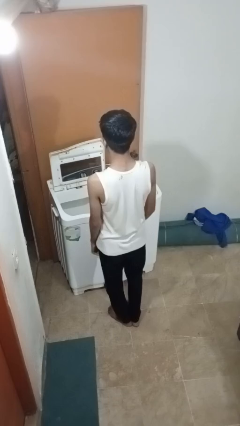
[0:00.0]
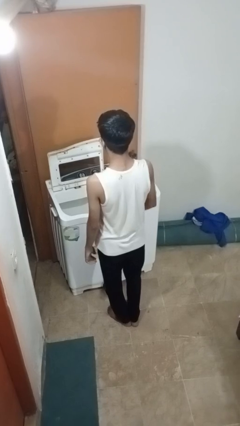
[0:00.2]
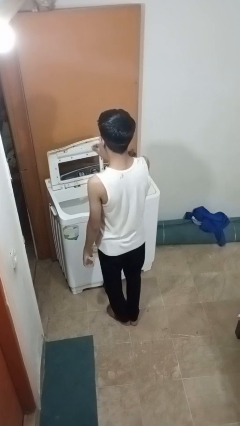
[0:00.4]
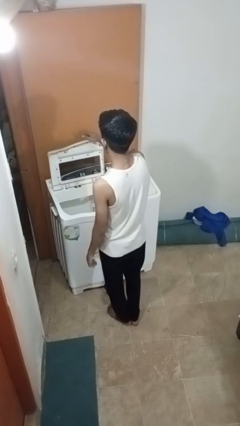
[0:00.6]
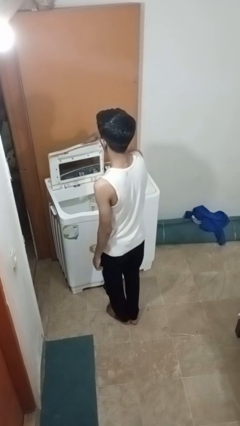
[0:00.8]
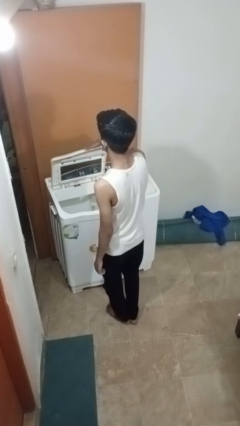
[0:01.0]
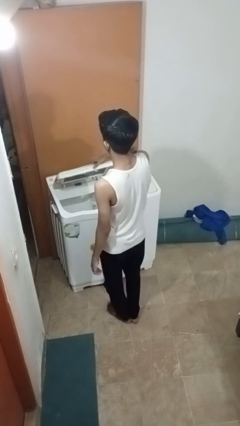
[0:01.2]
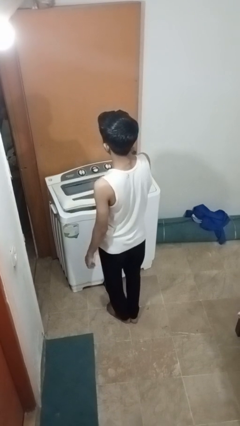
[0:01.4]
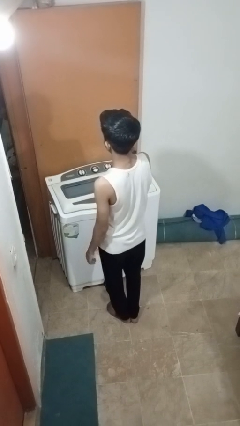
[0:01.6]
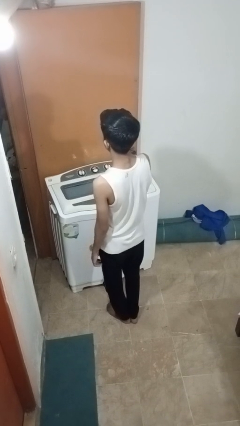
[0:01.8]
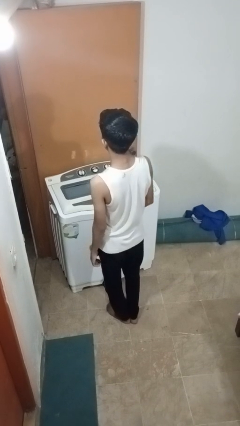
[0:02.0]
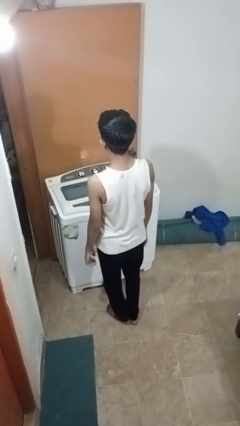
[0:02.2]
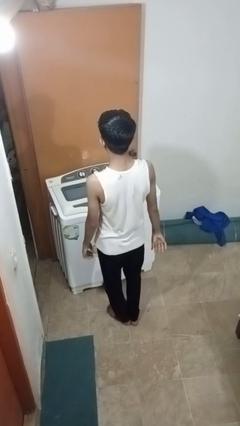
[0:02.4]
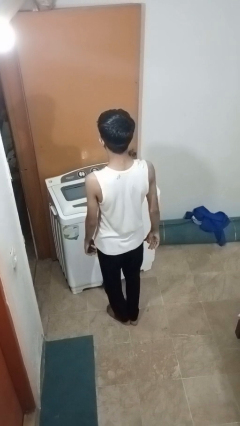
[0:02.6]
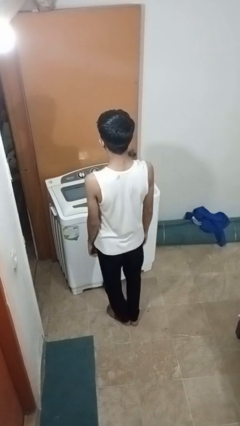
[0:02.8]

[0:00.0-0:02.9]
person closes clothes washer

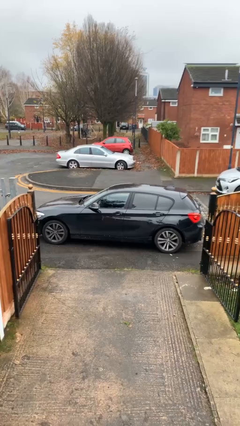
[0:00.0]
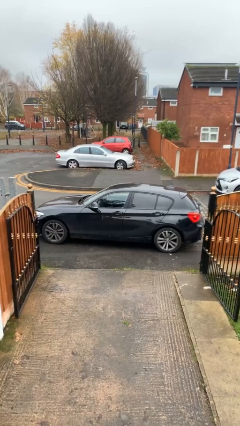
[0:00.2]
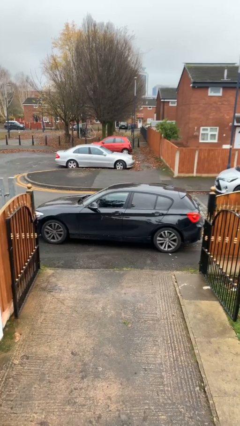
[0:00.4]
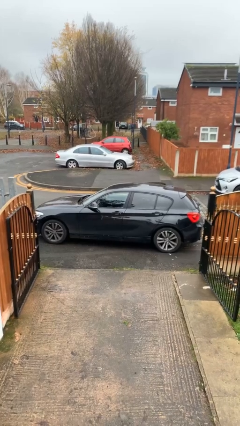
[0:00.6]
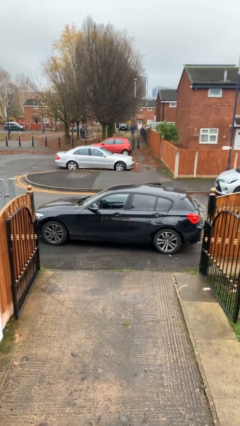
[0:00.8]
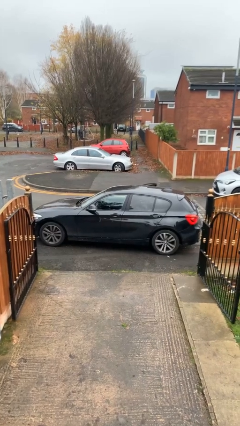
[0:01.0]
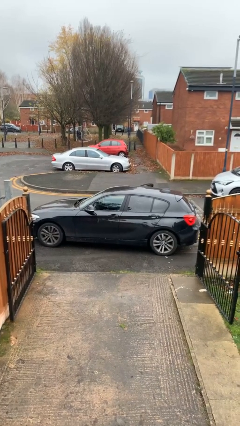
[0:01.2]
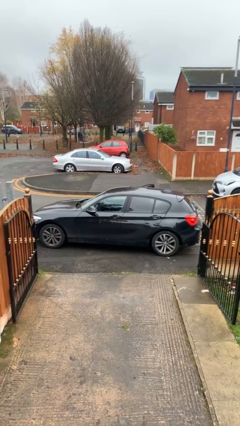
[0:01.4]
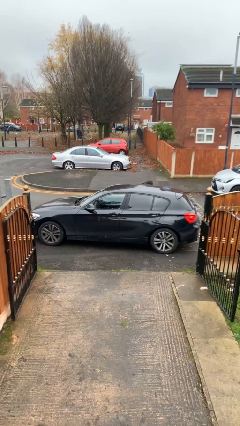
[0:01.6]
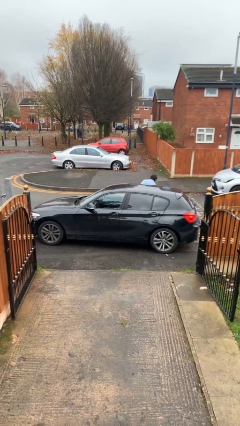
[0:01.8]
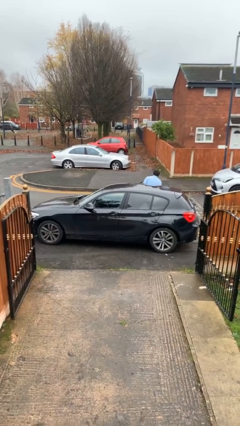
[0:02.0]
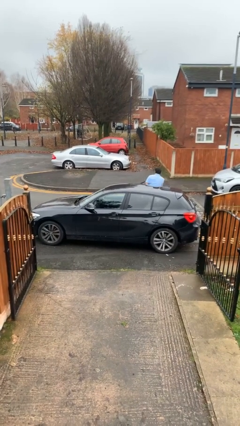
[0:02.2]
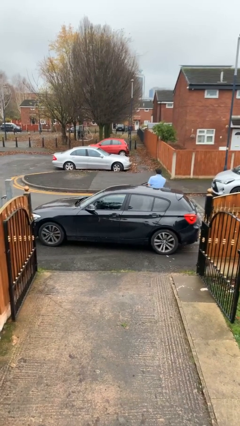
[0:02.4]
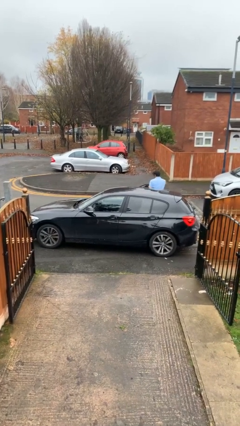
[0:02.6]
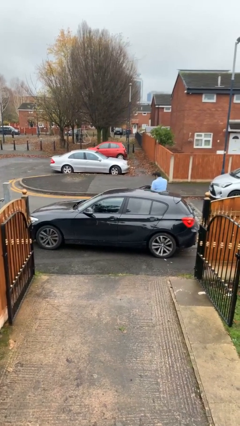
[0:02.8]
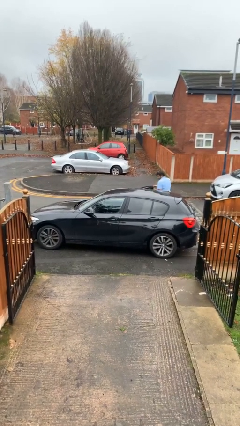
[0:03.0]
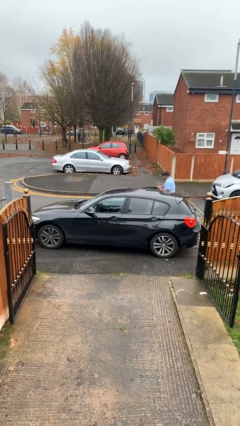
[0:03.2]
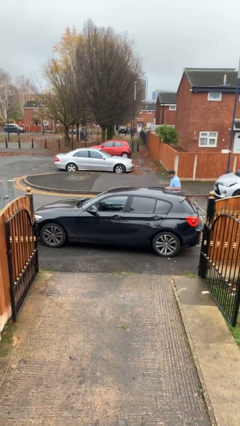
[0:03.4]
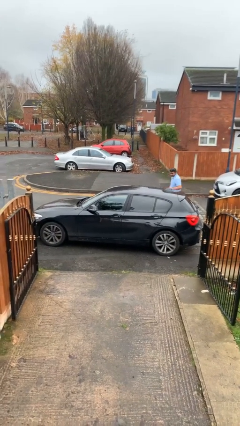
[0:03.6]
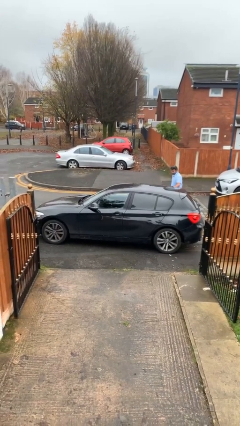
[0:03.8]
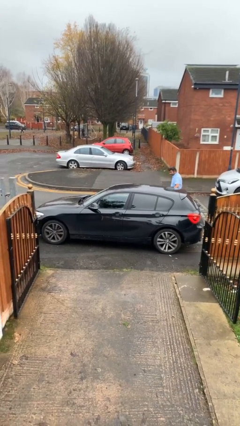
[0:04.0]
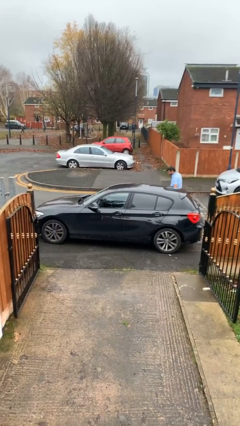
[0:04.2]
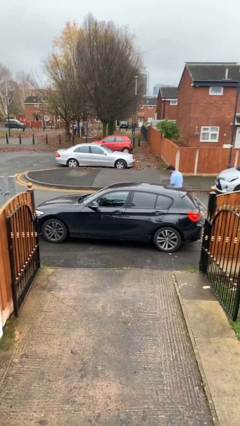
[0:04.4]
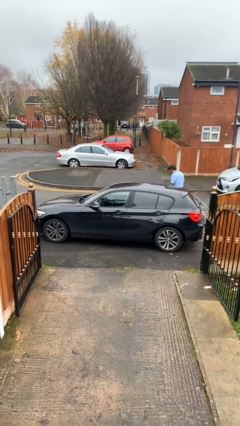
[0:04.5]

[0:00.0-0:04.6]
car drops off person

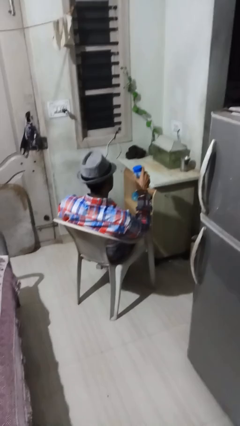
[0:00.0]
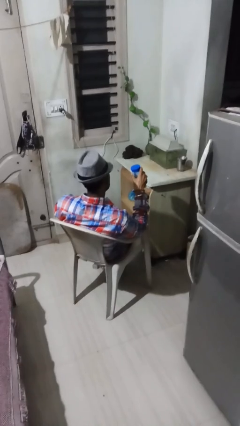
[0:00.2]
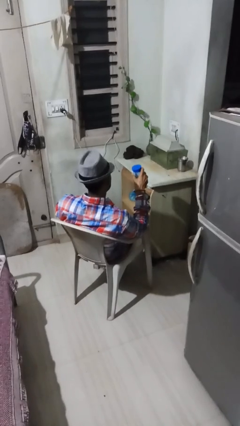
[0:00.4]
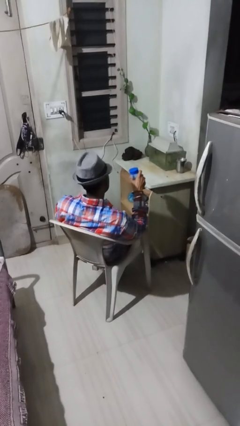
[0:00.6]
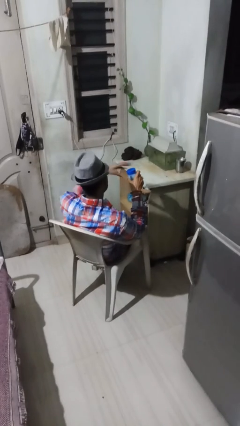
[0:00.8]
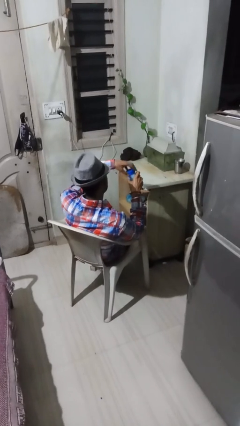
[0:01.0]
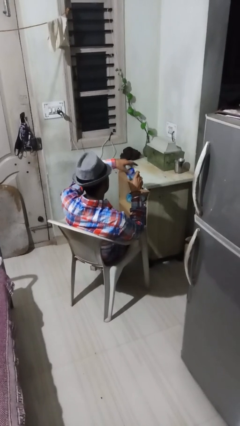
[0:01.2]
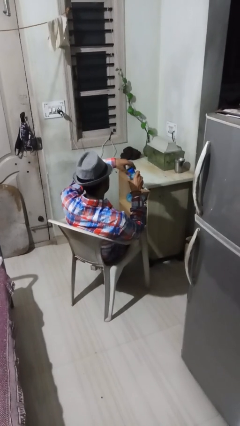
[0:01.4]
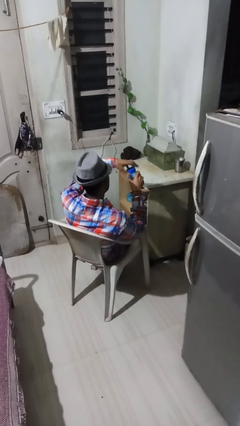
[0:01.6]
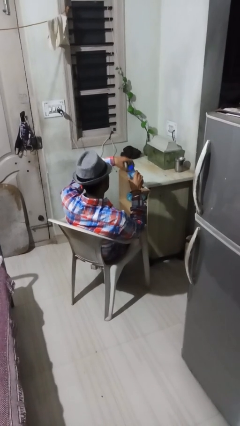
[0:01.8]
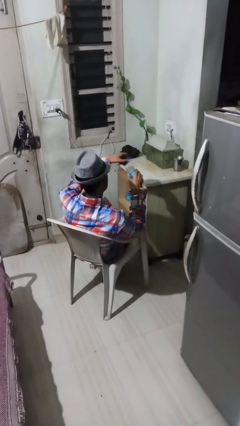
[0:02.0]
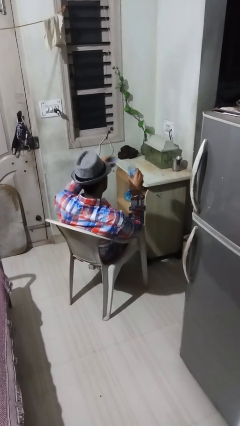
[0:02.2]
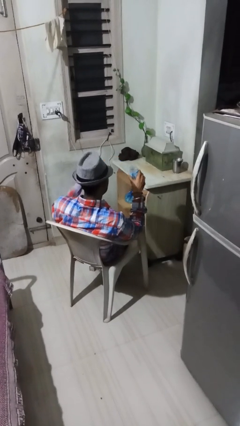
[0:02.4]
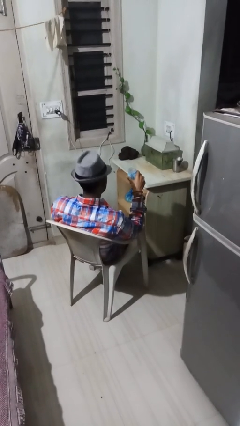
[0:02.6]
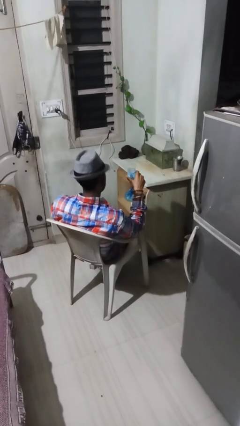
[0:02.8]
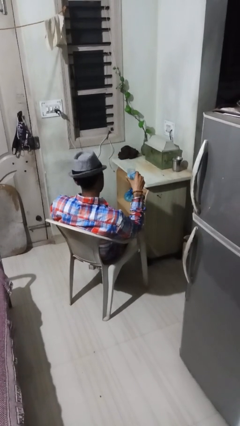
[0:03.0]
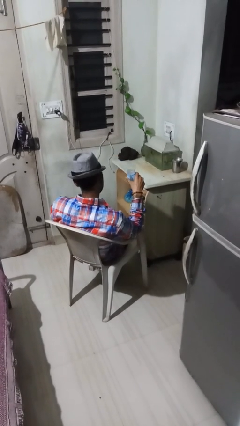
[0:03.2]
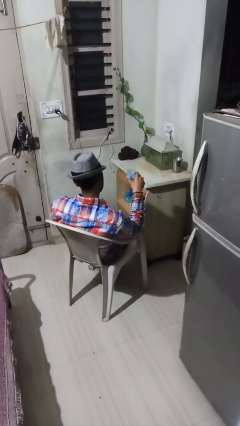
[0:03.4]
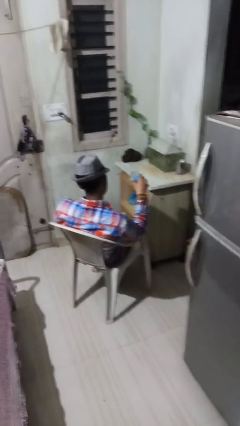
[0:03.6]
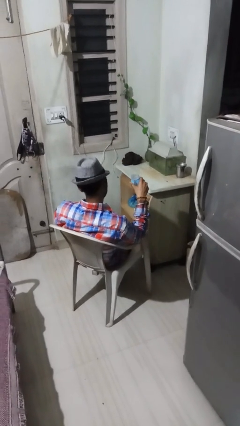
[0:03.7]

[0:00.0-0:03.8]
person opens jar

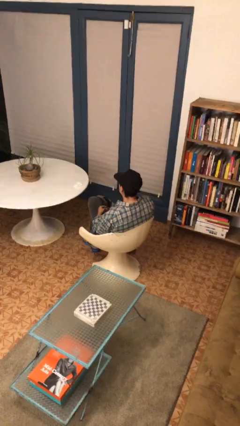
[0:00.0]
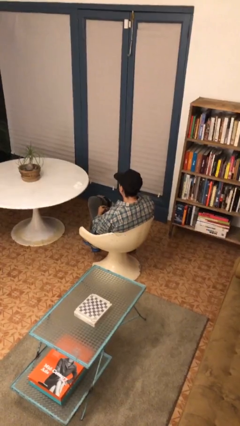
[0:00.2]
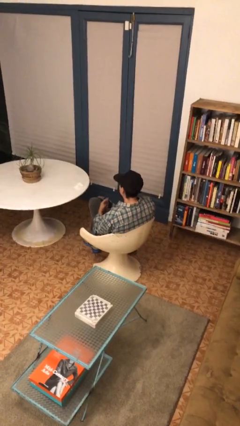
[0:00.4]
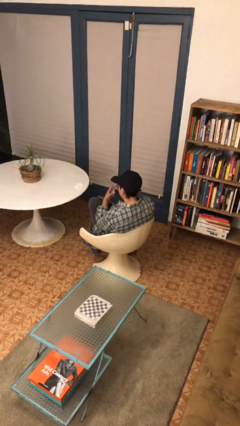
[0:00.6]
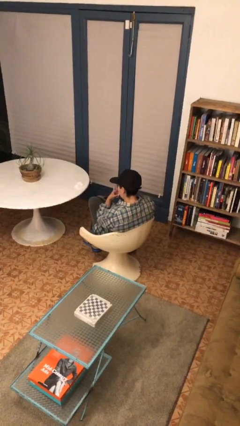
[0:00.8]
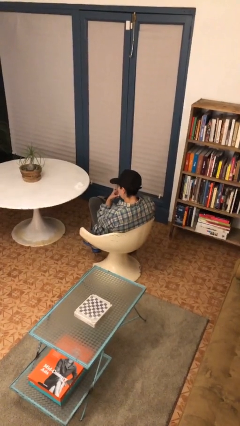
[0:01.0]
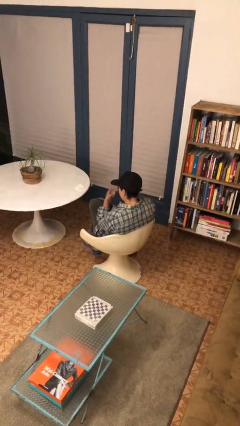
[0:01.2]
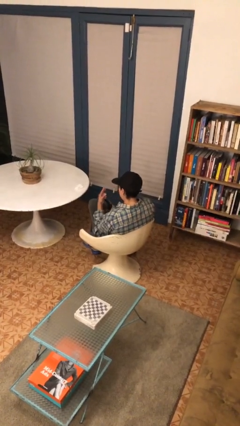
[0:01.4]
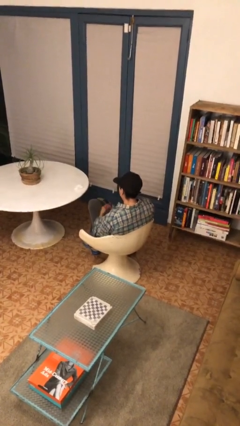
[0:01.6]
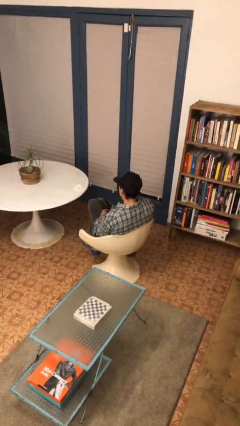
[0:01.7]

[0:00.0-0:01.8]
person gestures watch closely

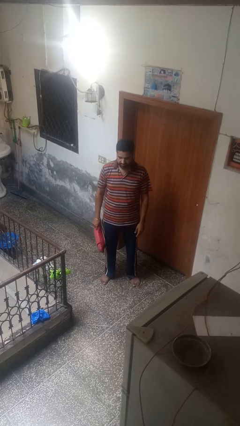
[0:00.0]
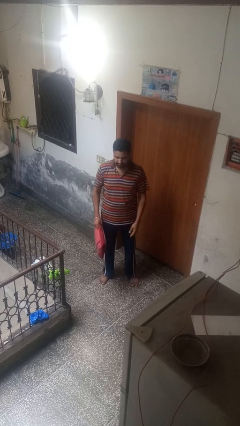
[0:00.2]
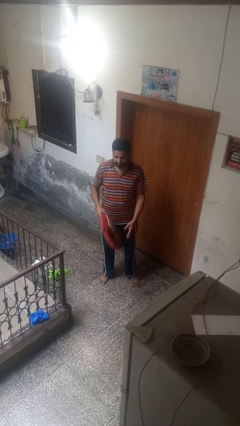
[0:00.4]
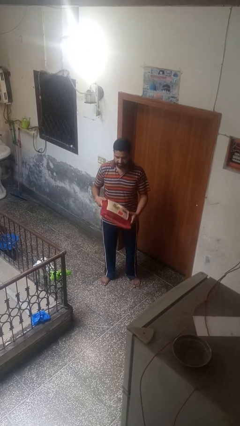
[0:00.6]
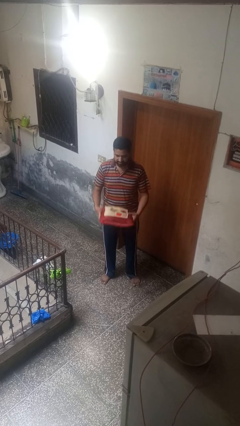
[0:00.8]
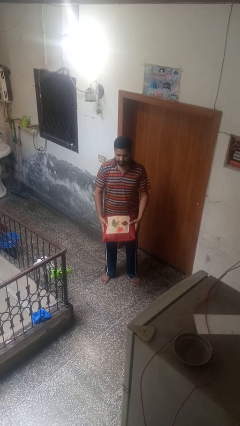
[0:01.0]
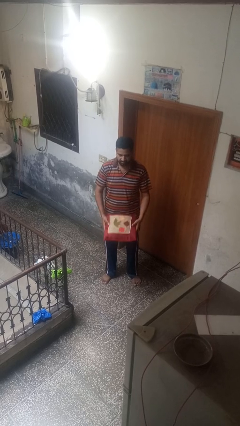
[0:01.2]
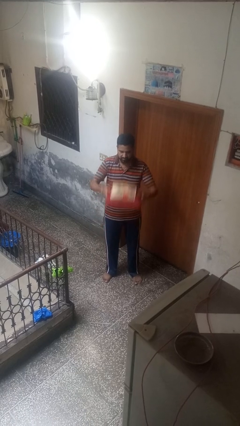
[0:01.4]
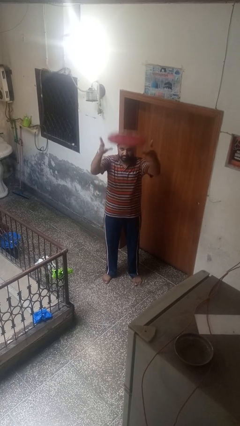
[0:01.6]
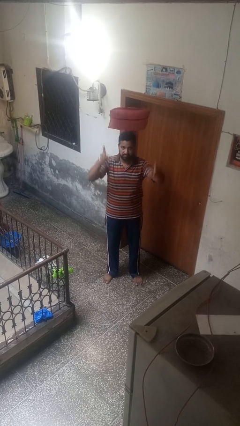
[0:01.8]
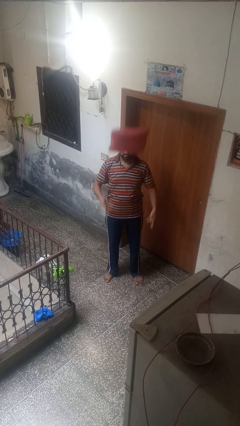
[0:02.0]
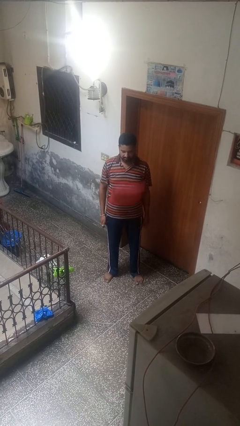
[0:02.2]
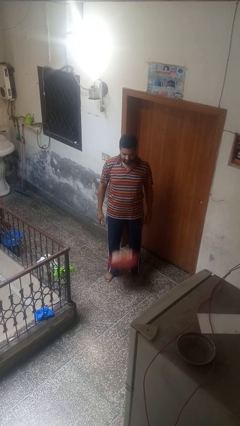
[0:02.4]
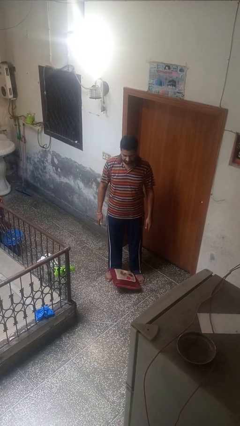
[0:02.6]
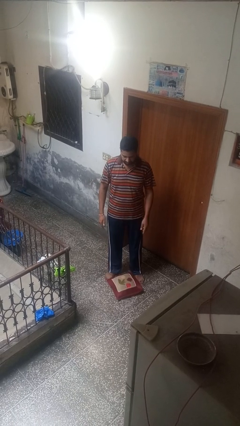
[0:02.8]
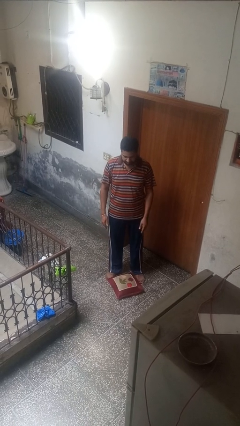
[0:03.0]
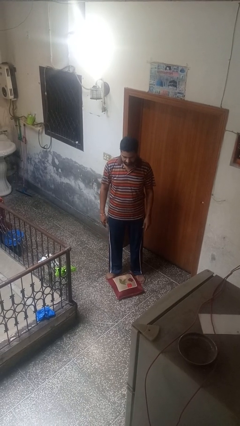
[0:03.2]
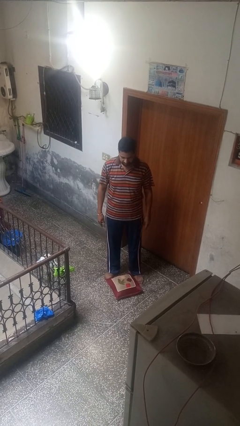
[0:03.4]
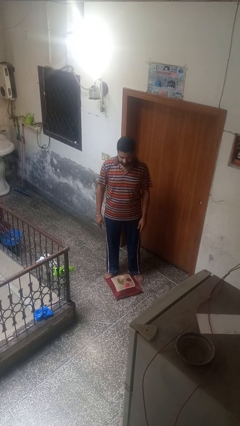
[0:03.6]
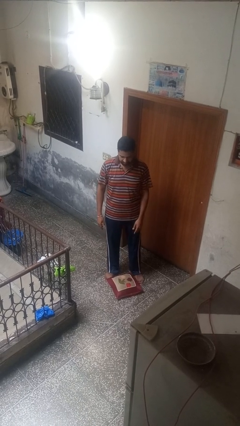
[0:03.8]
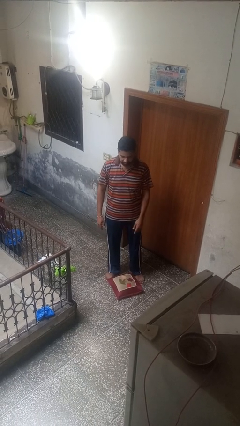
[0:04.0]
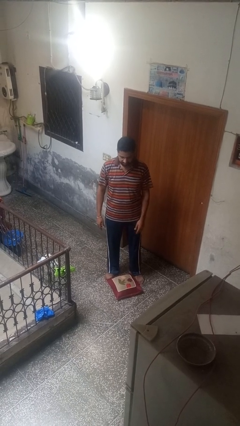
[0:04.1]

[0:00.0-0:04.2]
person throws object into air

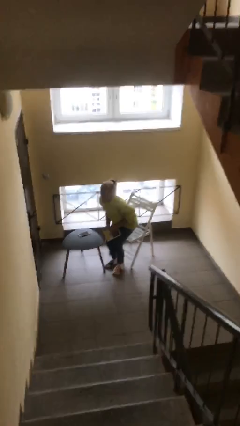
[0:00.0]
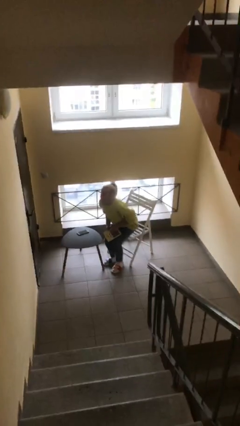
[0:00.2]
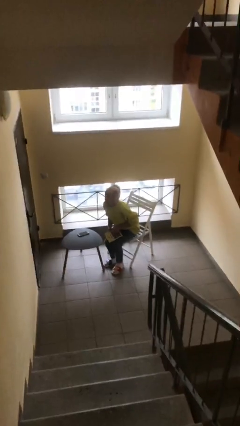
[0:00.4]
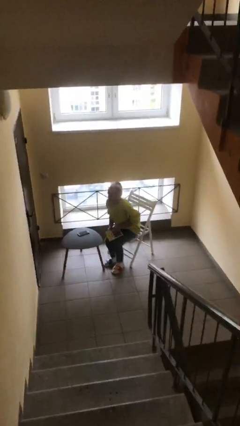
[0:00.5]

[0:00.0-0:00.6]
person sits down
